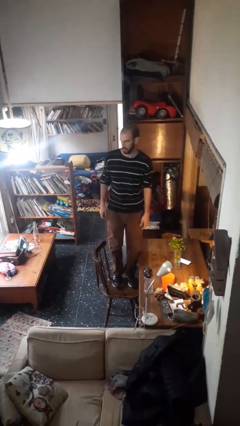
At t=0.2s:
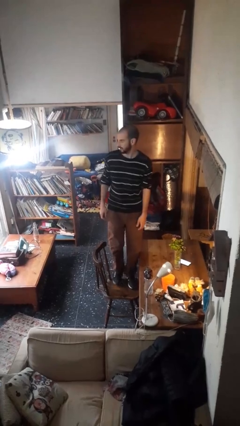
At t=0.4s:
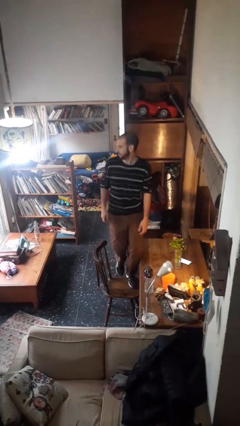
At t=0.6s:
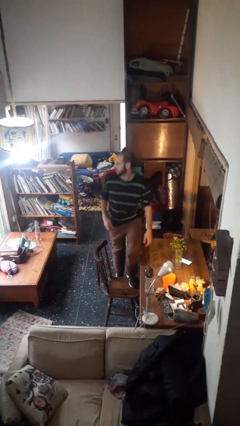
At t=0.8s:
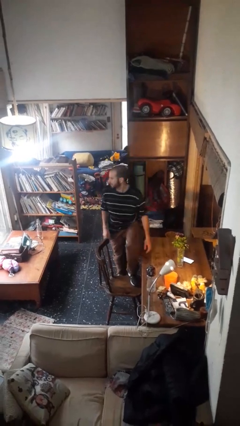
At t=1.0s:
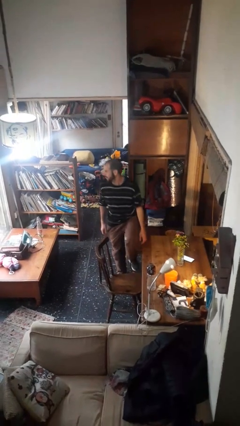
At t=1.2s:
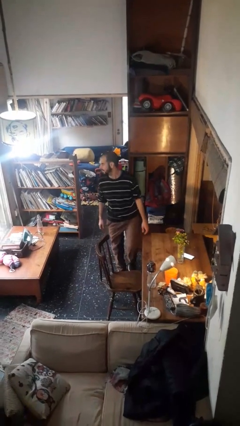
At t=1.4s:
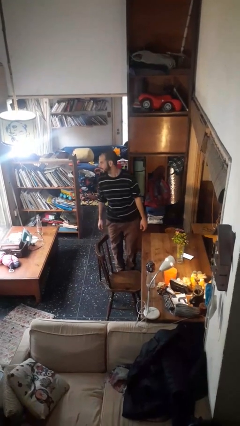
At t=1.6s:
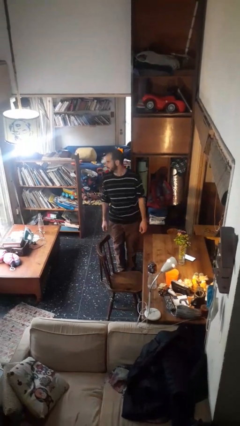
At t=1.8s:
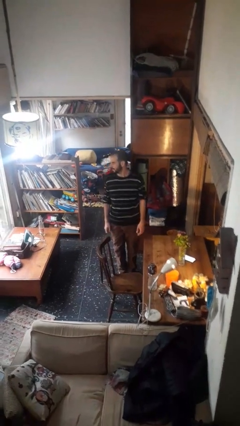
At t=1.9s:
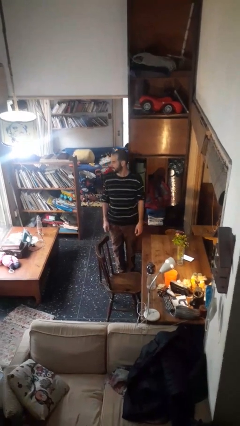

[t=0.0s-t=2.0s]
person climbs off chair

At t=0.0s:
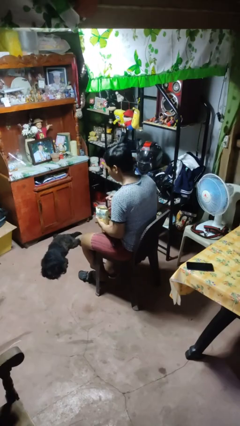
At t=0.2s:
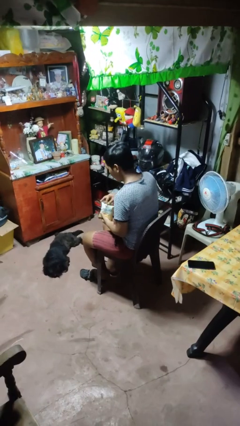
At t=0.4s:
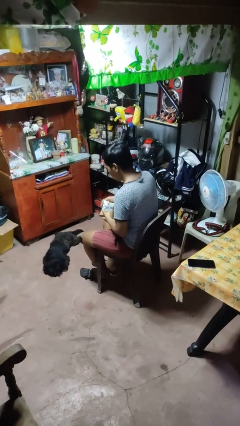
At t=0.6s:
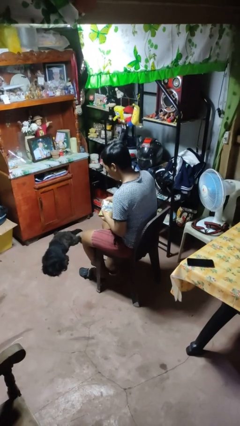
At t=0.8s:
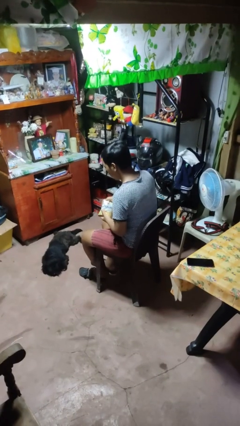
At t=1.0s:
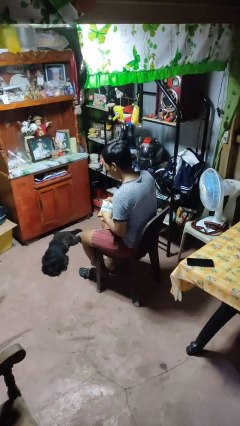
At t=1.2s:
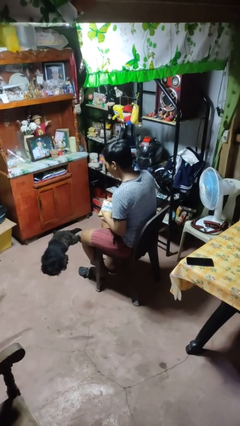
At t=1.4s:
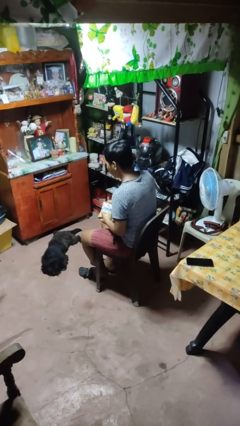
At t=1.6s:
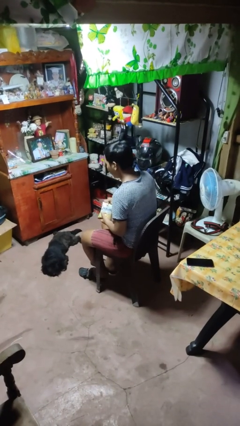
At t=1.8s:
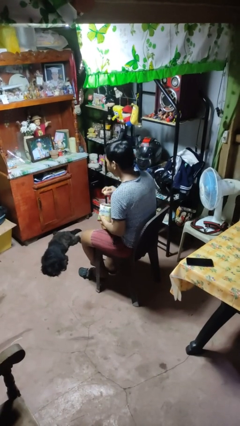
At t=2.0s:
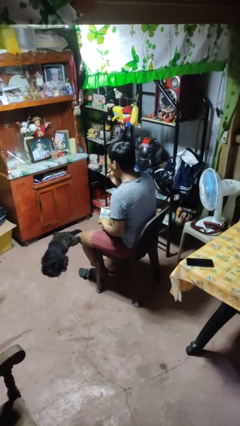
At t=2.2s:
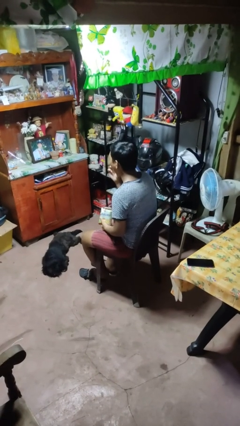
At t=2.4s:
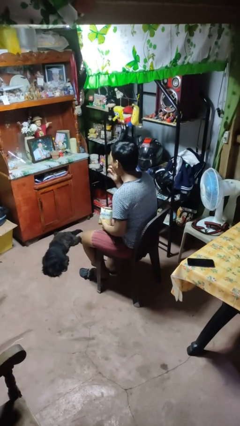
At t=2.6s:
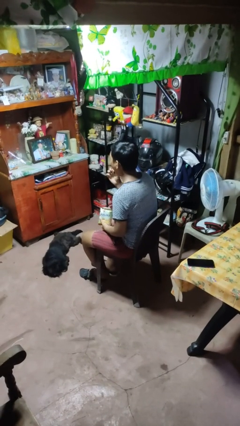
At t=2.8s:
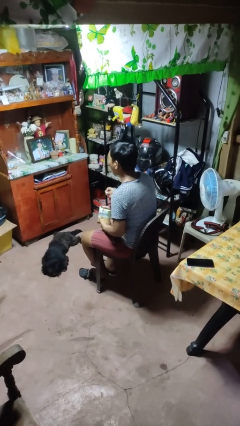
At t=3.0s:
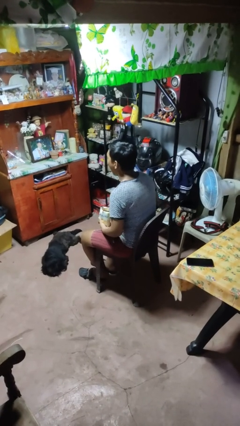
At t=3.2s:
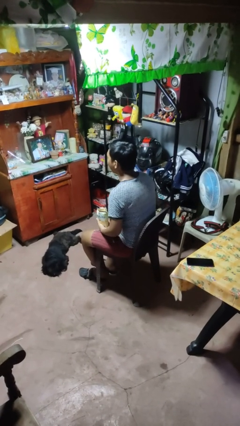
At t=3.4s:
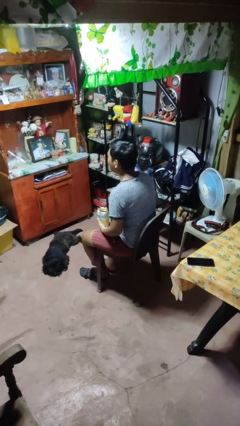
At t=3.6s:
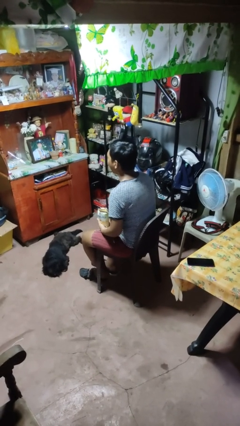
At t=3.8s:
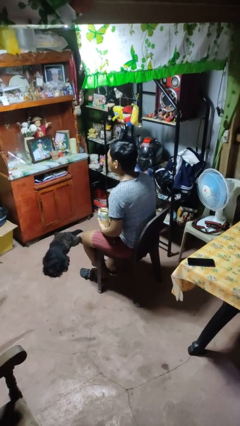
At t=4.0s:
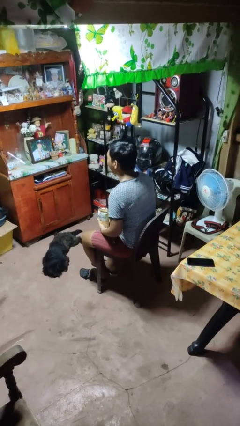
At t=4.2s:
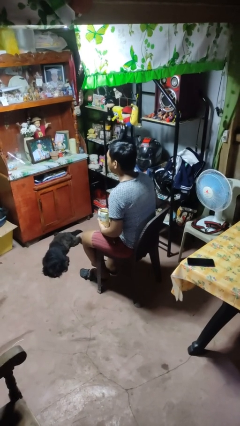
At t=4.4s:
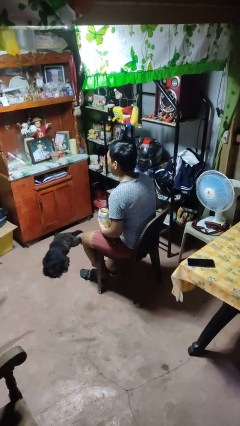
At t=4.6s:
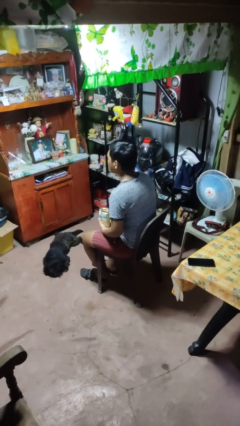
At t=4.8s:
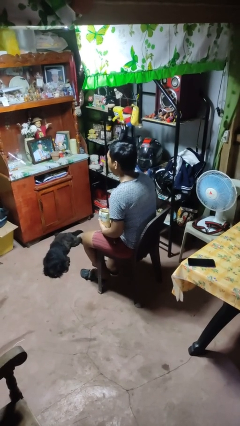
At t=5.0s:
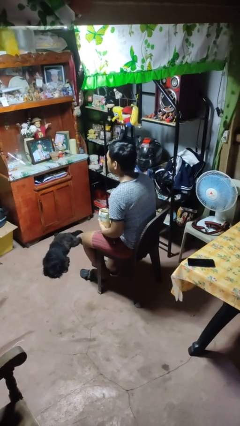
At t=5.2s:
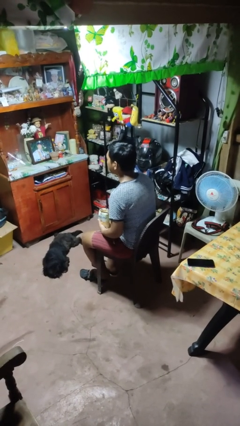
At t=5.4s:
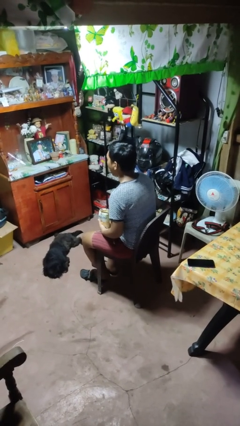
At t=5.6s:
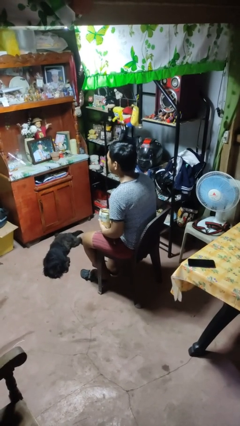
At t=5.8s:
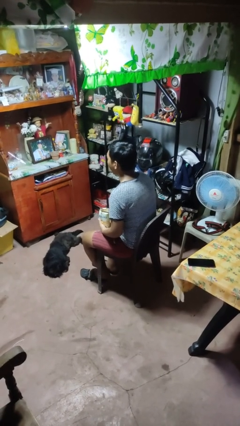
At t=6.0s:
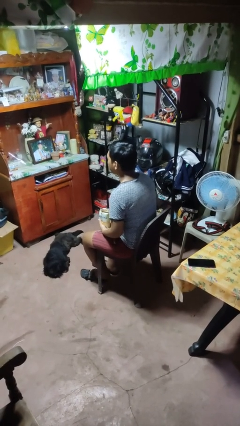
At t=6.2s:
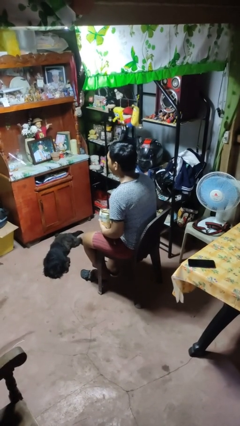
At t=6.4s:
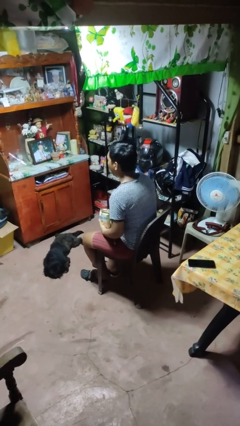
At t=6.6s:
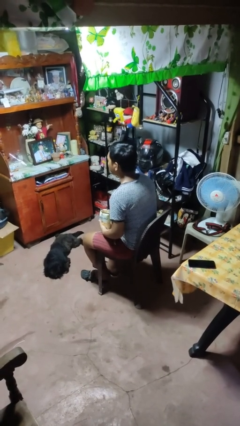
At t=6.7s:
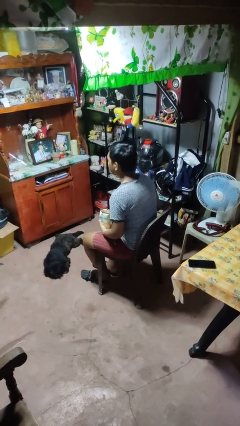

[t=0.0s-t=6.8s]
person eats snack from bag

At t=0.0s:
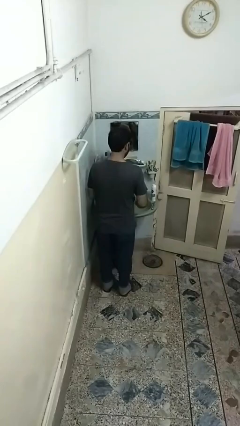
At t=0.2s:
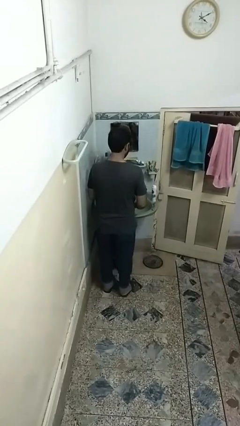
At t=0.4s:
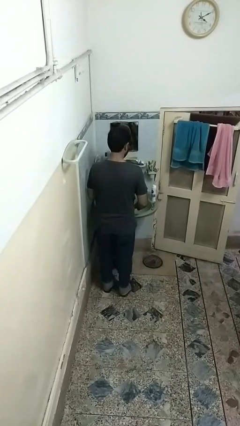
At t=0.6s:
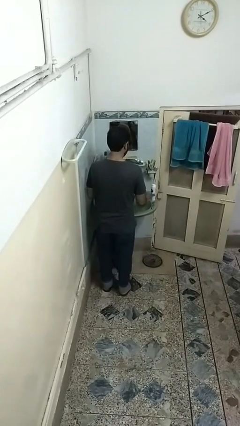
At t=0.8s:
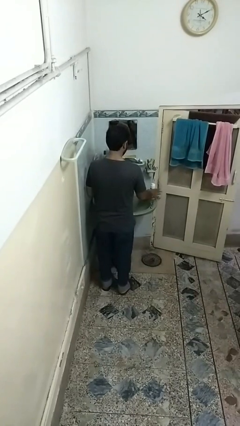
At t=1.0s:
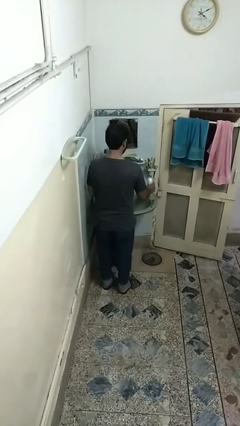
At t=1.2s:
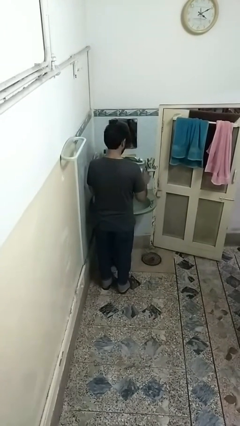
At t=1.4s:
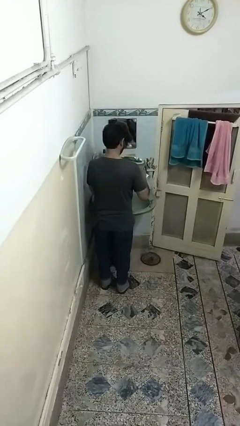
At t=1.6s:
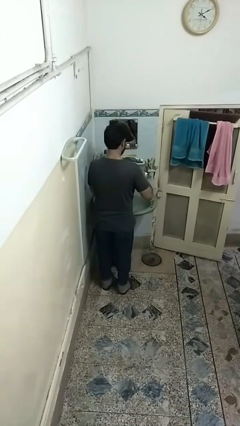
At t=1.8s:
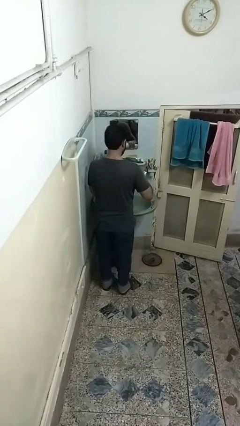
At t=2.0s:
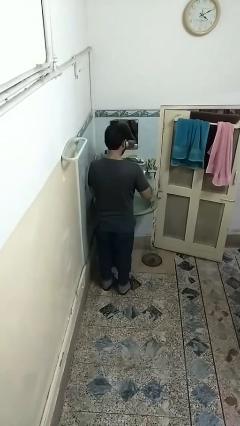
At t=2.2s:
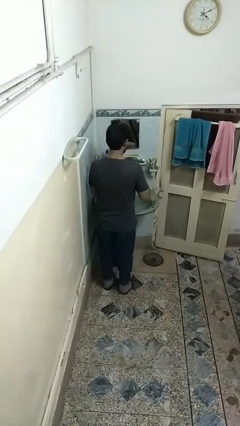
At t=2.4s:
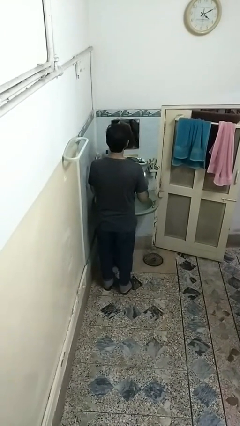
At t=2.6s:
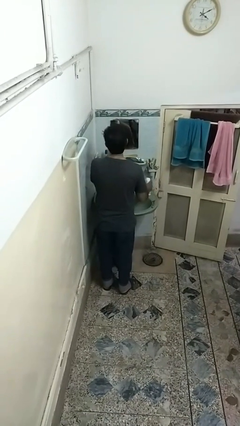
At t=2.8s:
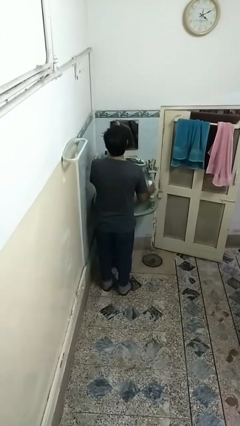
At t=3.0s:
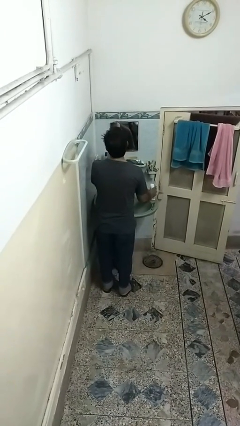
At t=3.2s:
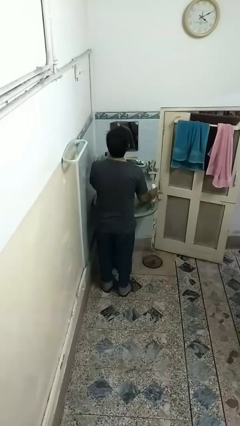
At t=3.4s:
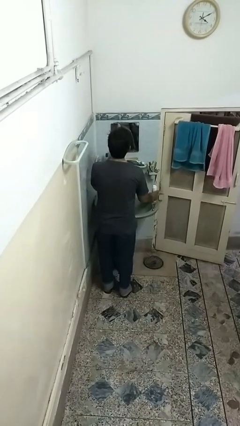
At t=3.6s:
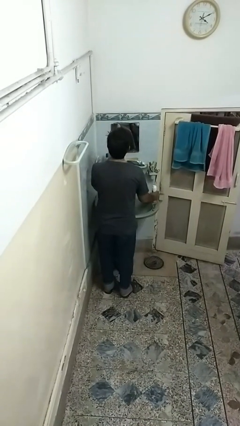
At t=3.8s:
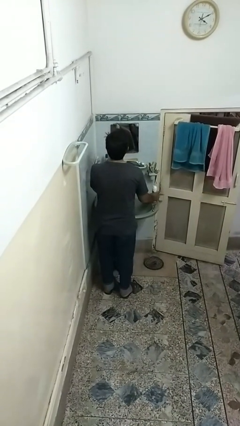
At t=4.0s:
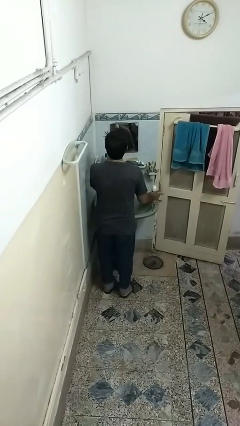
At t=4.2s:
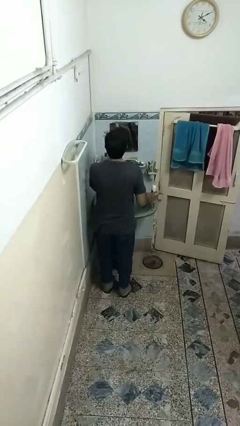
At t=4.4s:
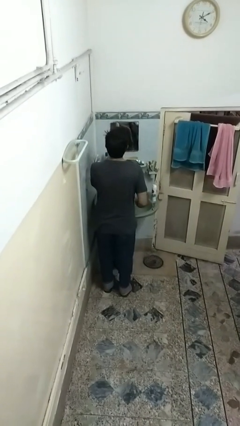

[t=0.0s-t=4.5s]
person applies shaving cream

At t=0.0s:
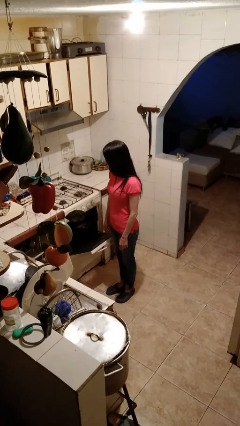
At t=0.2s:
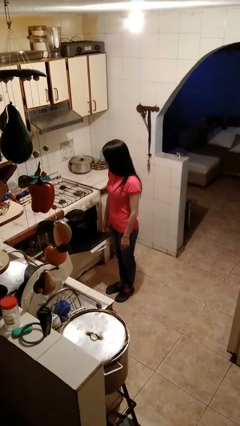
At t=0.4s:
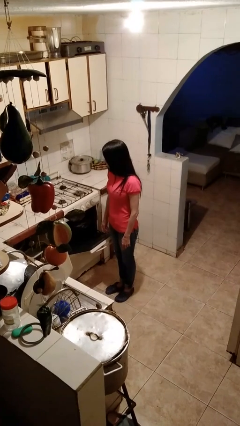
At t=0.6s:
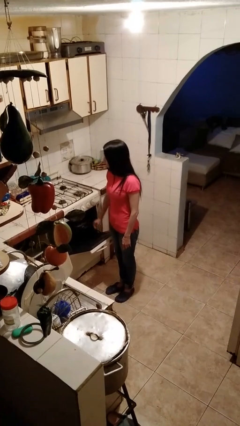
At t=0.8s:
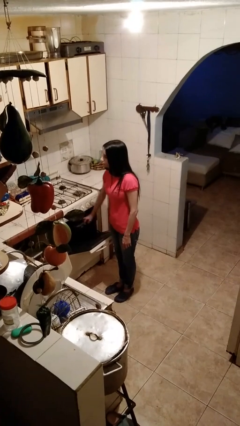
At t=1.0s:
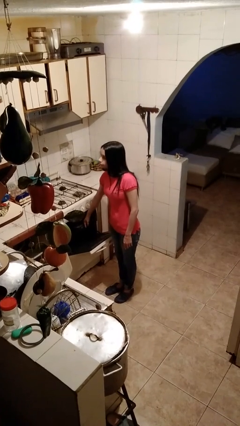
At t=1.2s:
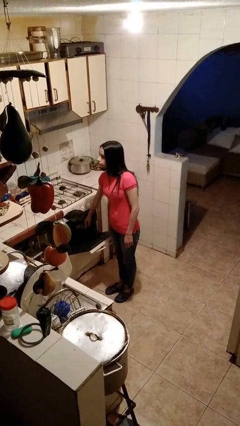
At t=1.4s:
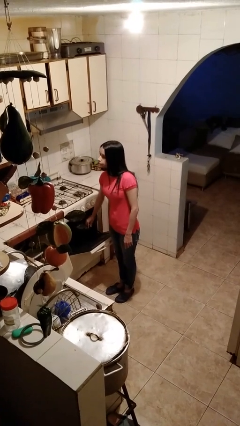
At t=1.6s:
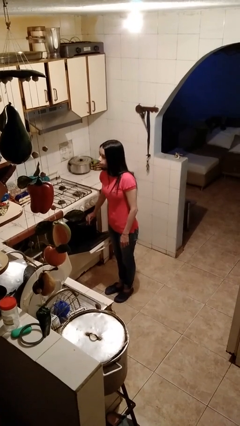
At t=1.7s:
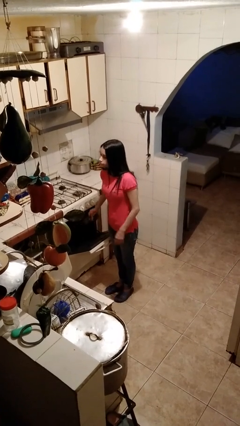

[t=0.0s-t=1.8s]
person takes object from oven

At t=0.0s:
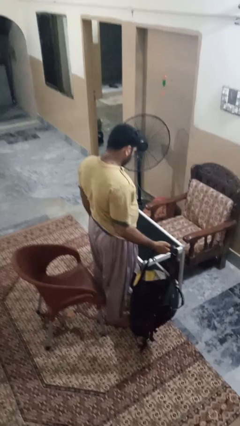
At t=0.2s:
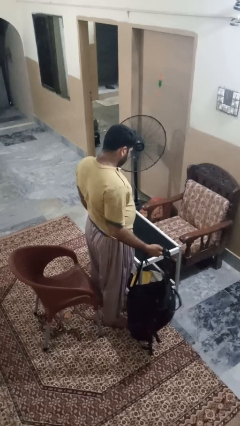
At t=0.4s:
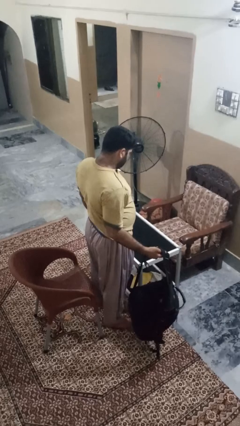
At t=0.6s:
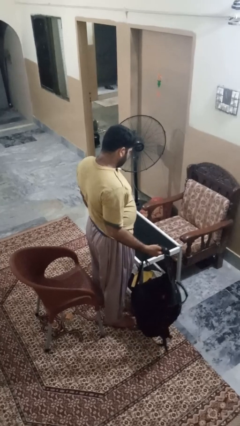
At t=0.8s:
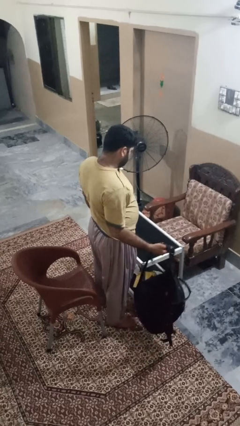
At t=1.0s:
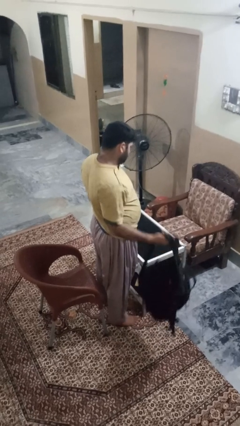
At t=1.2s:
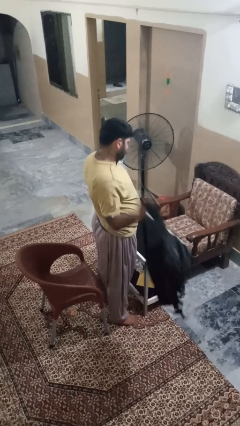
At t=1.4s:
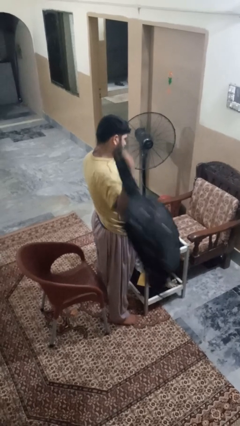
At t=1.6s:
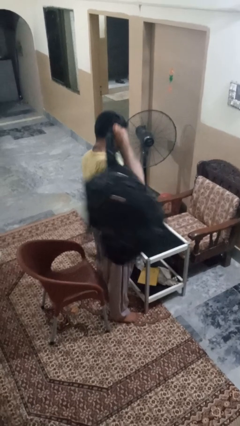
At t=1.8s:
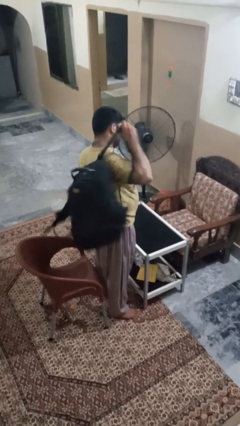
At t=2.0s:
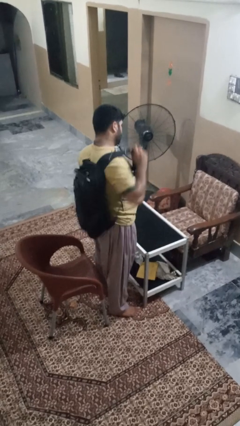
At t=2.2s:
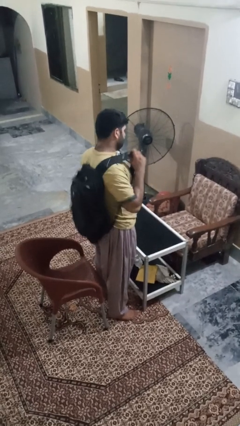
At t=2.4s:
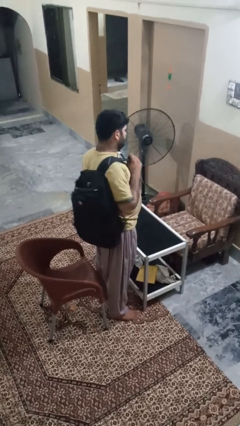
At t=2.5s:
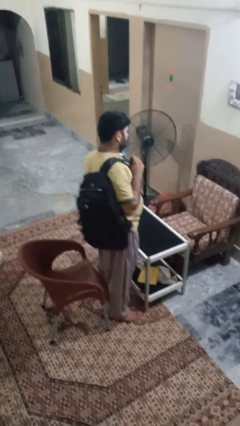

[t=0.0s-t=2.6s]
person puts on backpack
